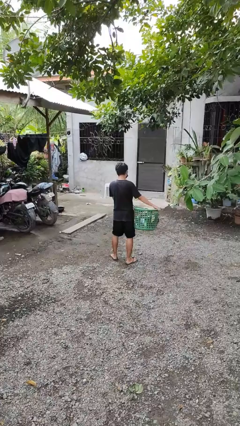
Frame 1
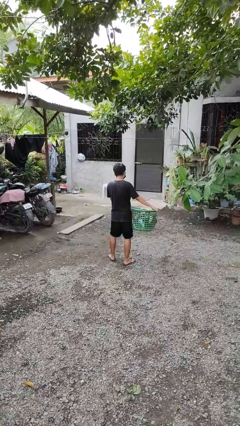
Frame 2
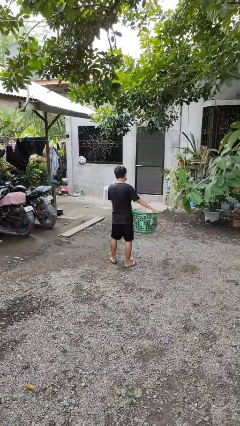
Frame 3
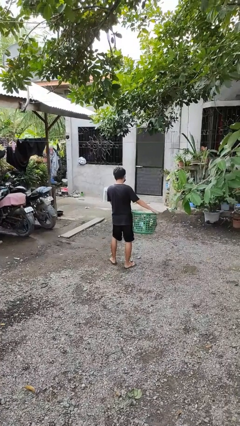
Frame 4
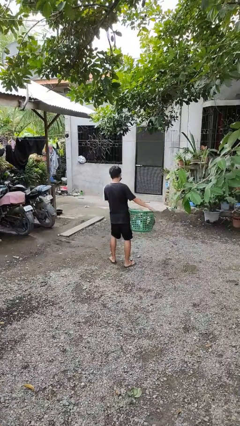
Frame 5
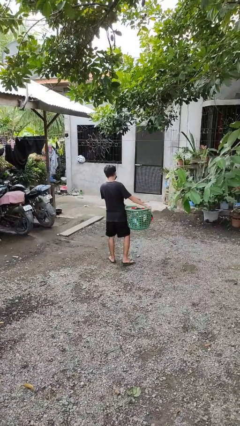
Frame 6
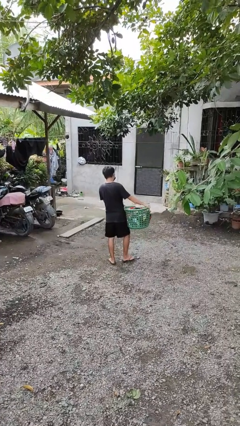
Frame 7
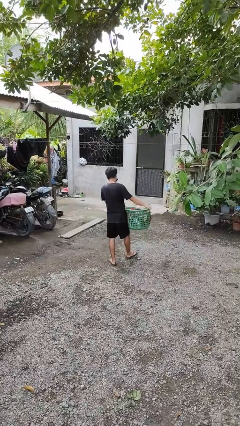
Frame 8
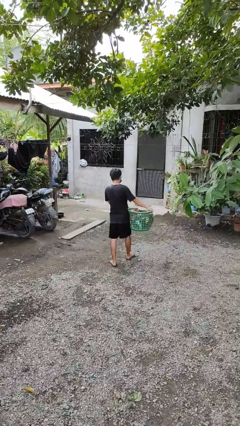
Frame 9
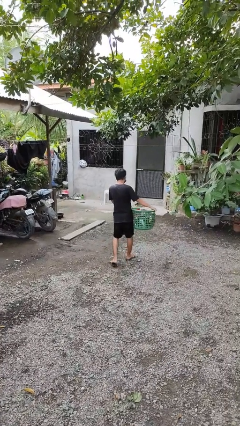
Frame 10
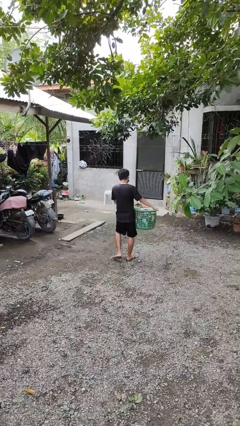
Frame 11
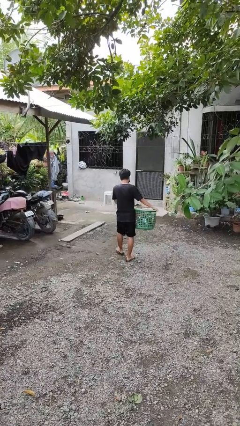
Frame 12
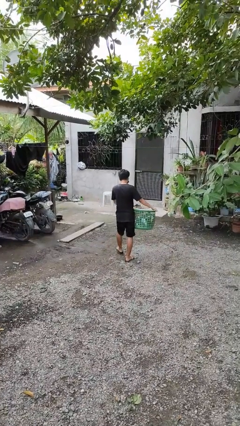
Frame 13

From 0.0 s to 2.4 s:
person carries laundry basket

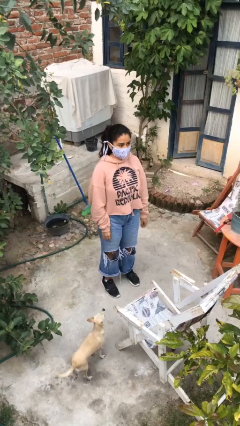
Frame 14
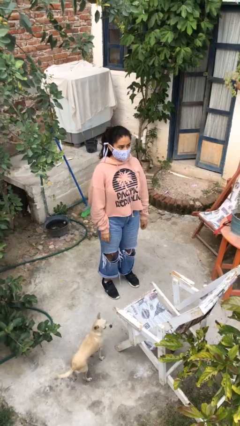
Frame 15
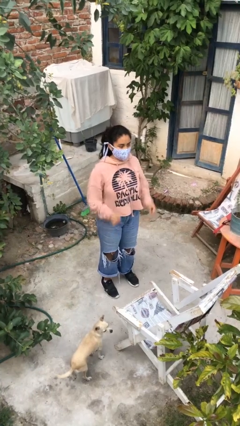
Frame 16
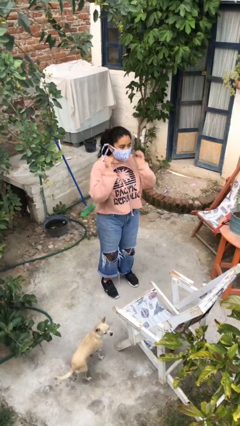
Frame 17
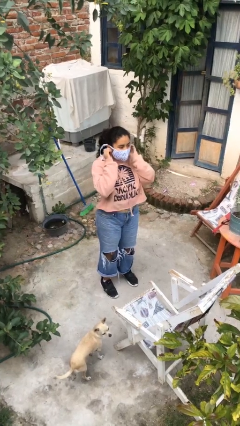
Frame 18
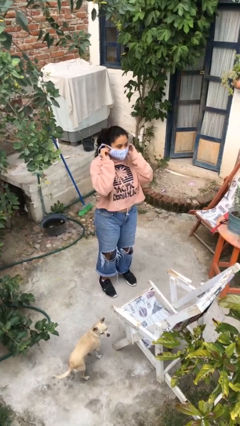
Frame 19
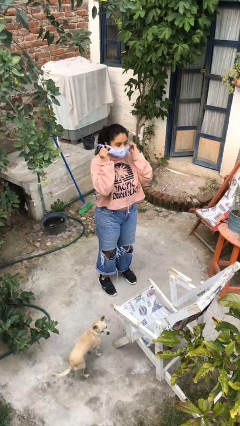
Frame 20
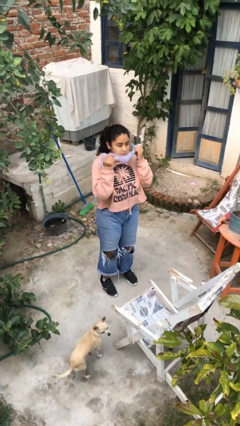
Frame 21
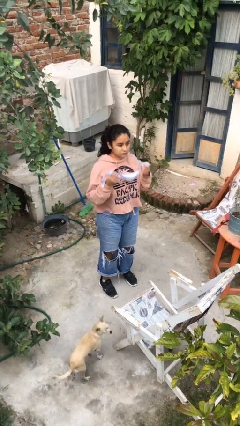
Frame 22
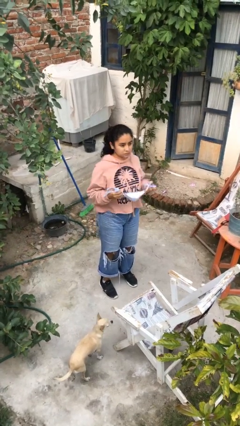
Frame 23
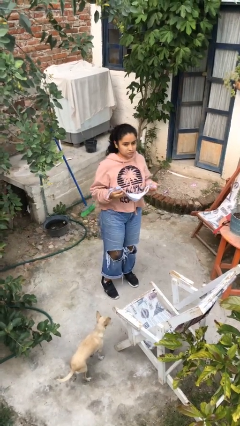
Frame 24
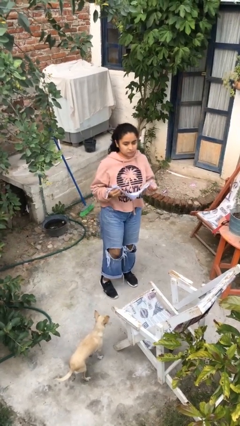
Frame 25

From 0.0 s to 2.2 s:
person takes off facemask

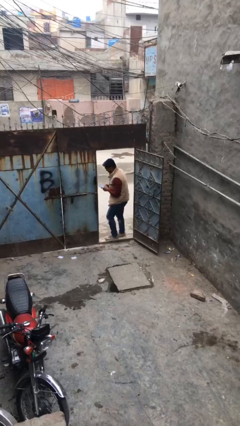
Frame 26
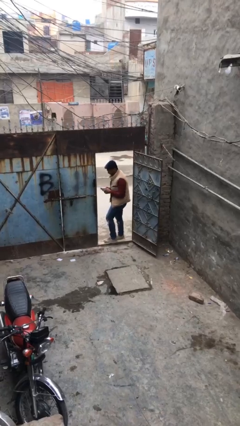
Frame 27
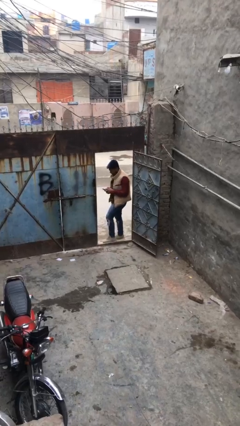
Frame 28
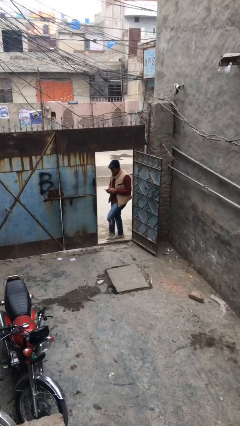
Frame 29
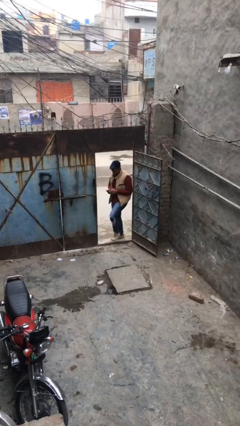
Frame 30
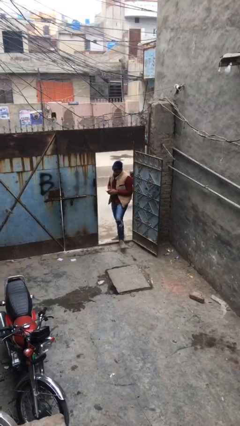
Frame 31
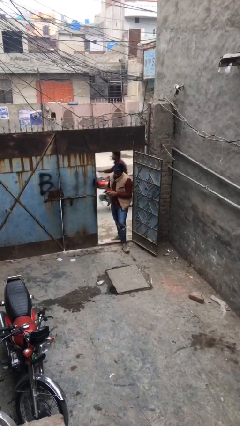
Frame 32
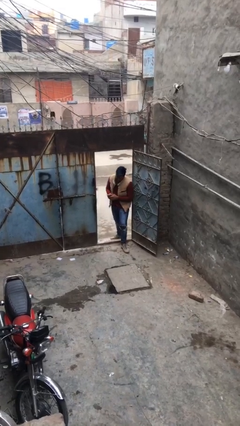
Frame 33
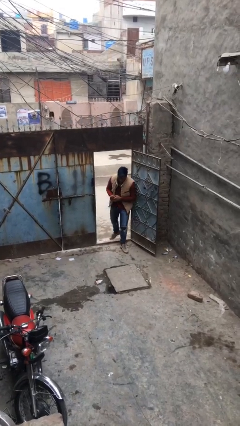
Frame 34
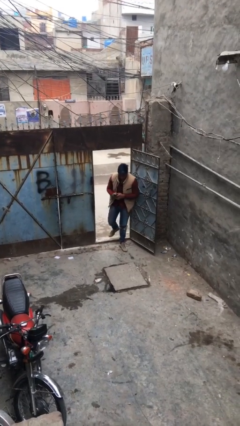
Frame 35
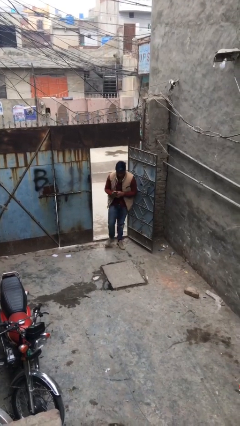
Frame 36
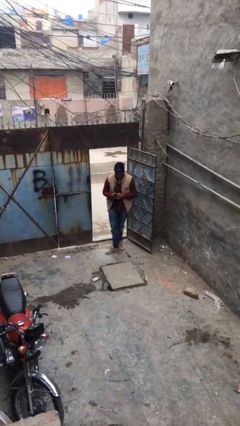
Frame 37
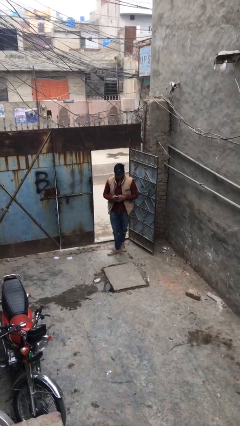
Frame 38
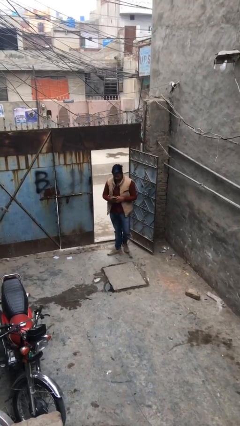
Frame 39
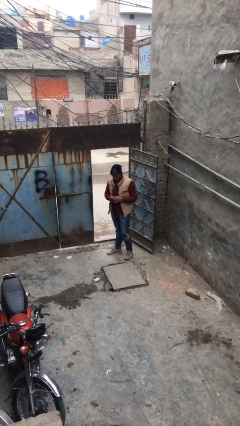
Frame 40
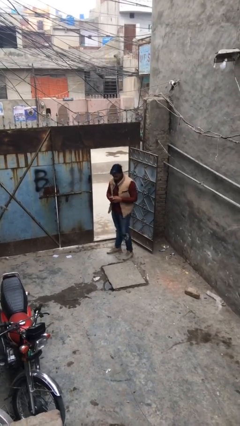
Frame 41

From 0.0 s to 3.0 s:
person enters scene through structure

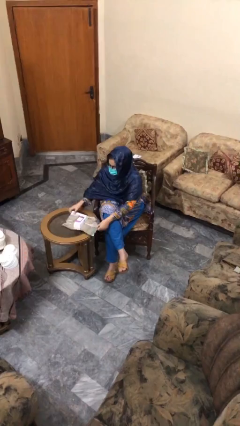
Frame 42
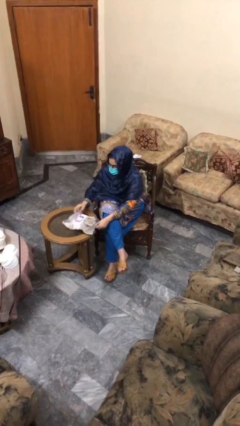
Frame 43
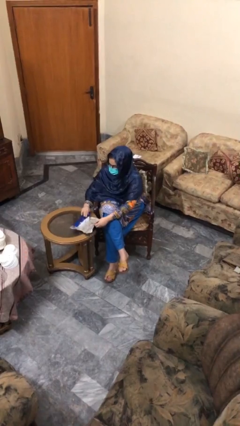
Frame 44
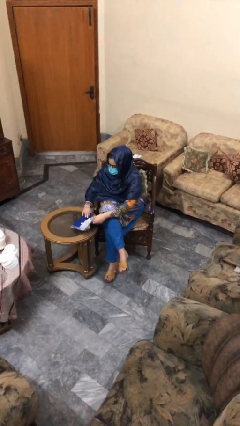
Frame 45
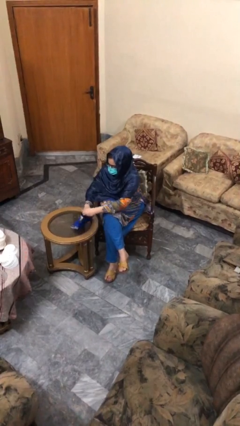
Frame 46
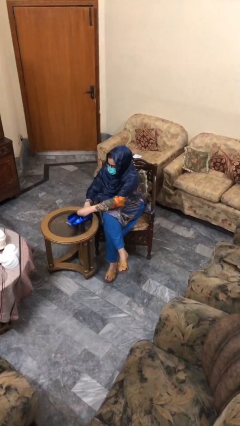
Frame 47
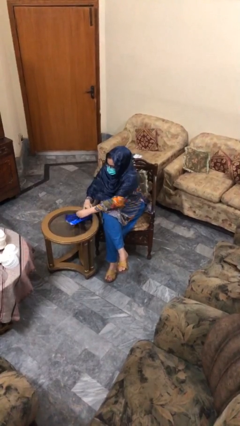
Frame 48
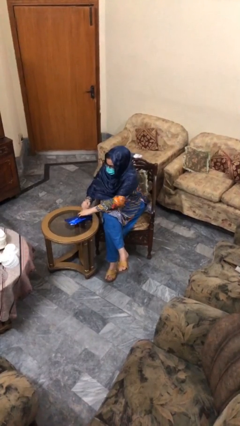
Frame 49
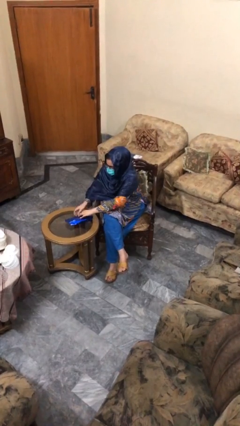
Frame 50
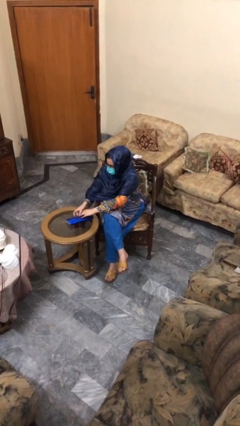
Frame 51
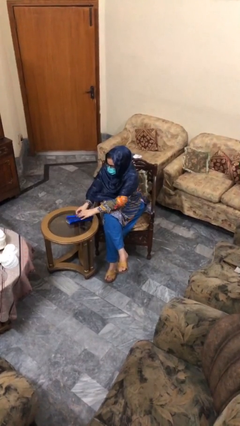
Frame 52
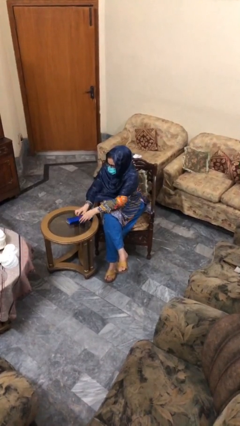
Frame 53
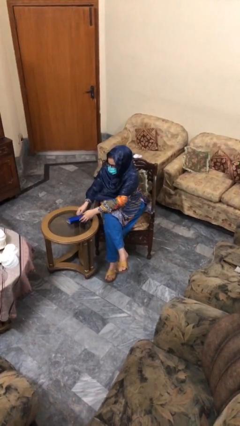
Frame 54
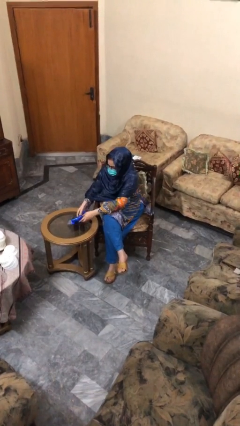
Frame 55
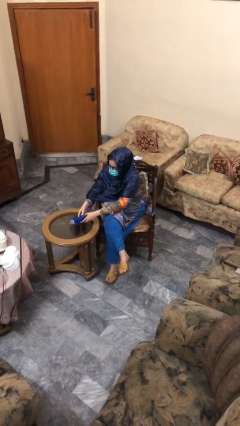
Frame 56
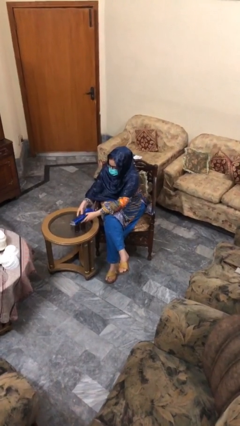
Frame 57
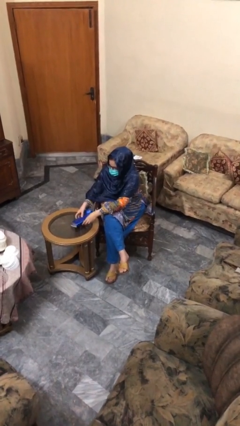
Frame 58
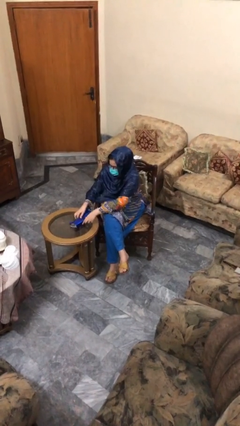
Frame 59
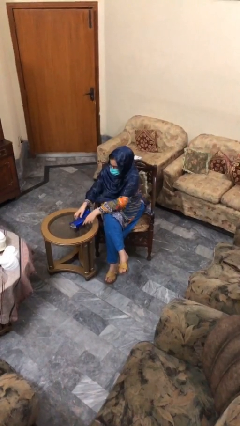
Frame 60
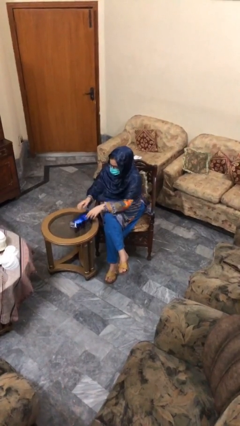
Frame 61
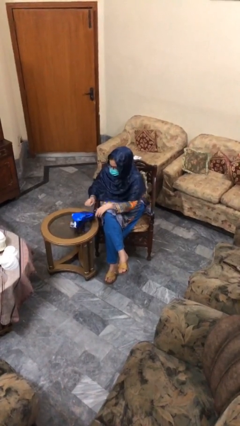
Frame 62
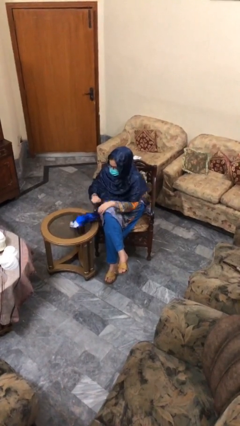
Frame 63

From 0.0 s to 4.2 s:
person wraps box

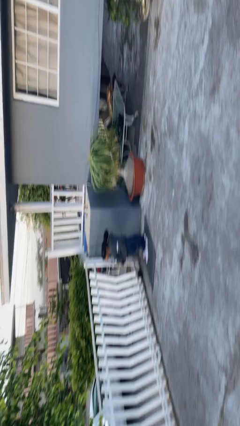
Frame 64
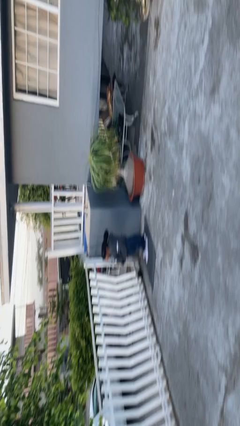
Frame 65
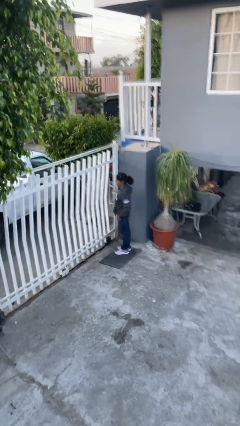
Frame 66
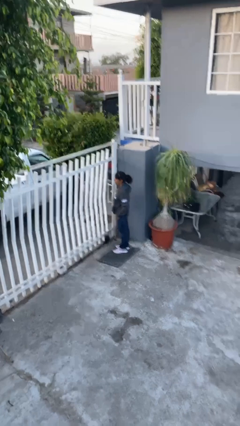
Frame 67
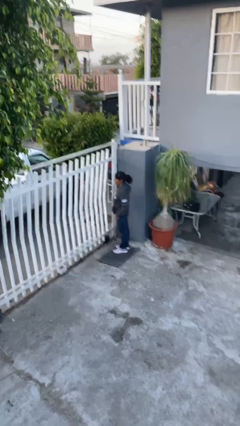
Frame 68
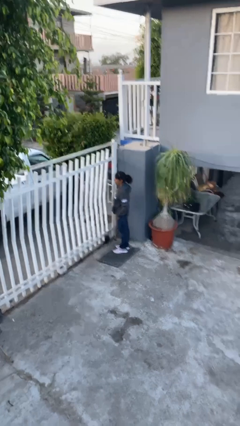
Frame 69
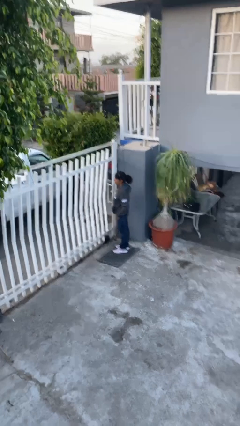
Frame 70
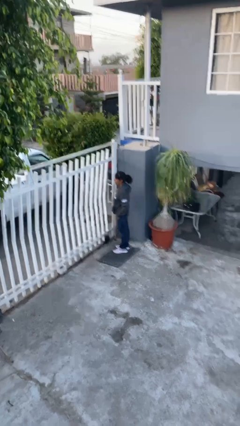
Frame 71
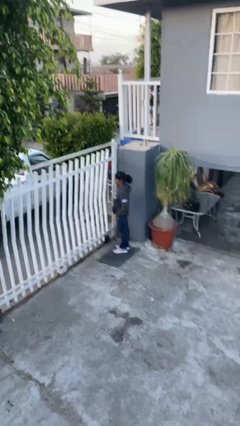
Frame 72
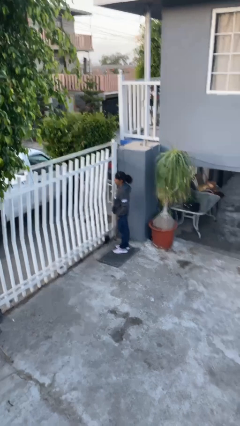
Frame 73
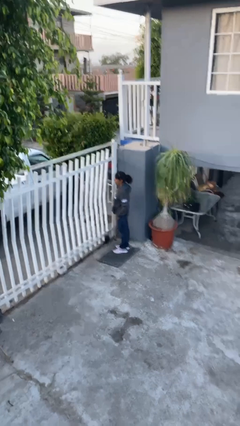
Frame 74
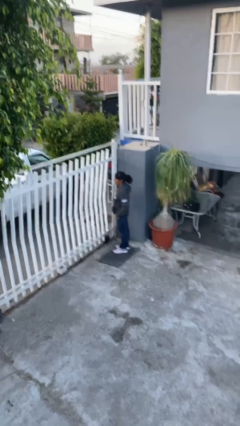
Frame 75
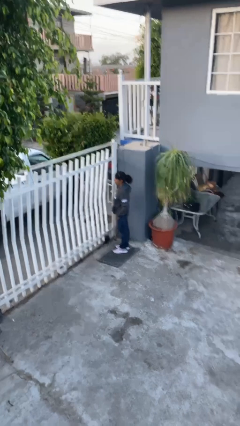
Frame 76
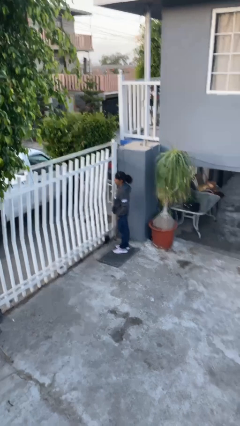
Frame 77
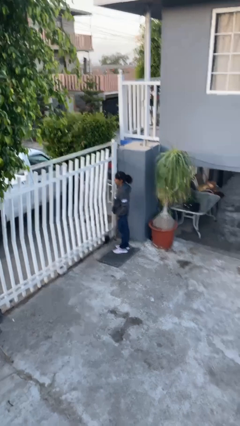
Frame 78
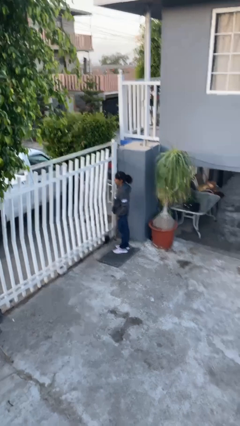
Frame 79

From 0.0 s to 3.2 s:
person closes facility door

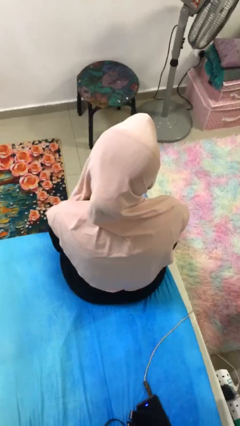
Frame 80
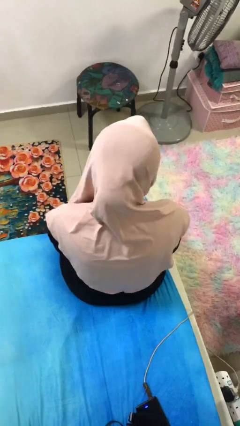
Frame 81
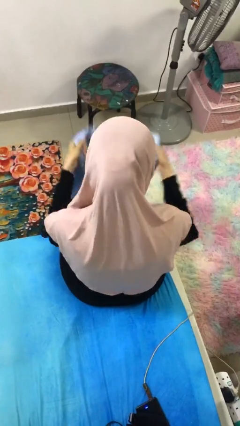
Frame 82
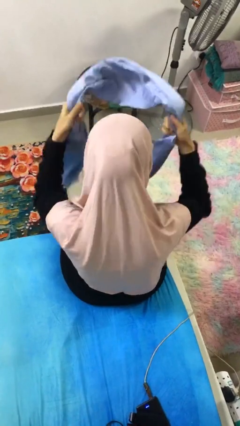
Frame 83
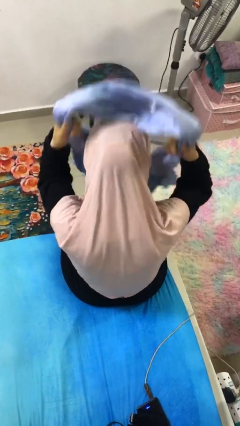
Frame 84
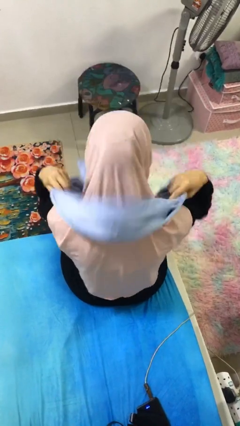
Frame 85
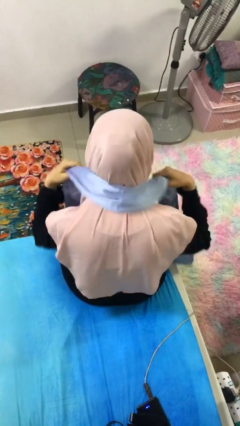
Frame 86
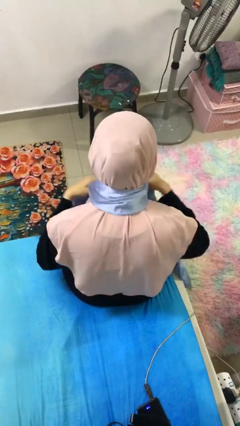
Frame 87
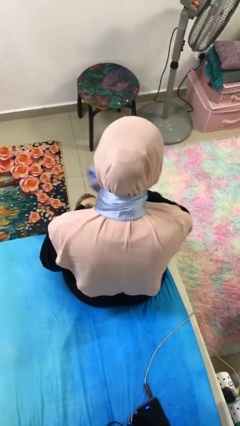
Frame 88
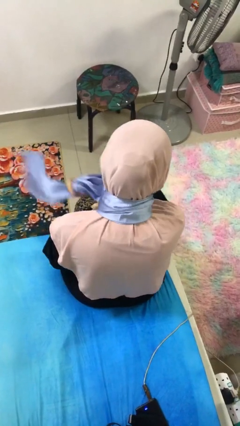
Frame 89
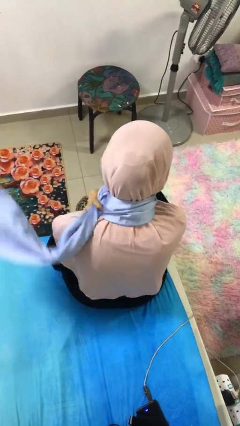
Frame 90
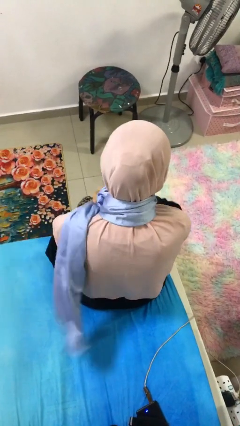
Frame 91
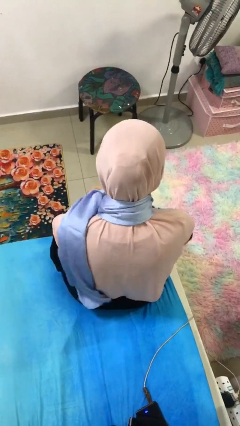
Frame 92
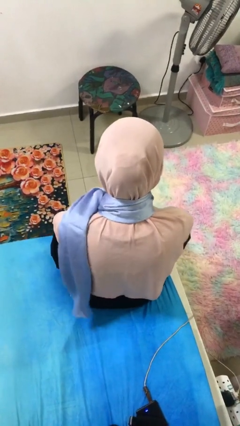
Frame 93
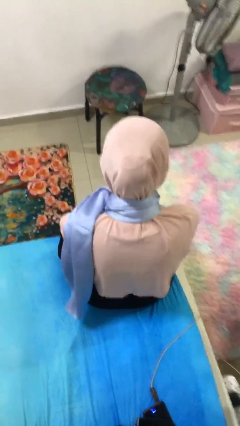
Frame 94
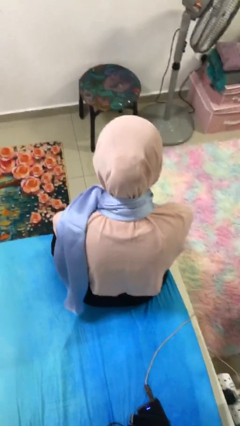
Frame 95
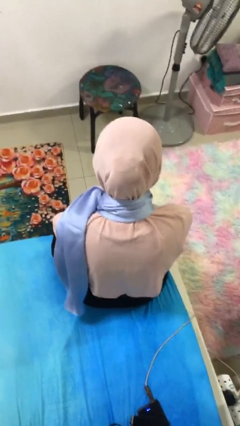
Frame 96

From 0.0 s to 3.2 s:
person puts on scarf
